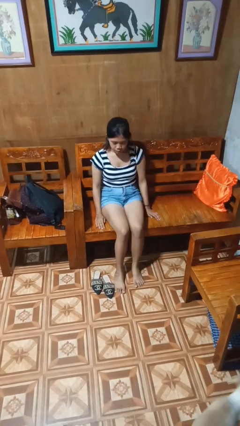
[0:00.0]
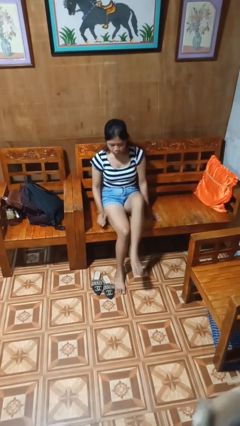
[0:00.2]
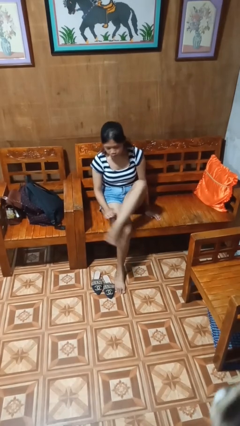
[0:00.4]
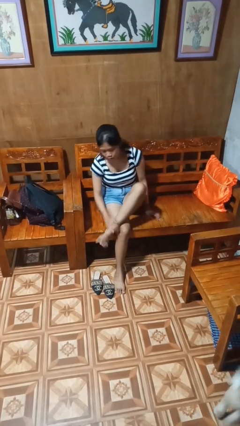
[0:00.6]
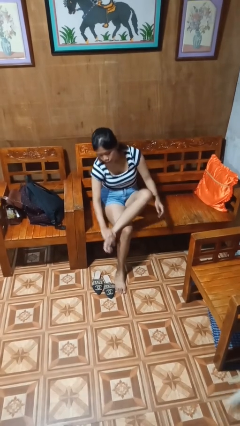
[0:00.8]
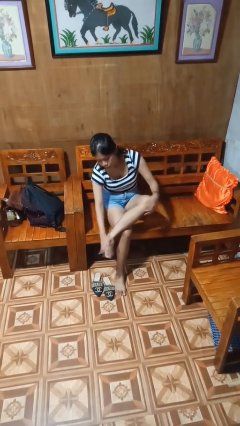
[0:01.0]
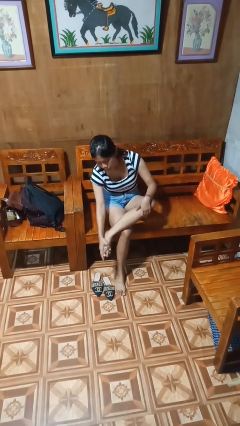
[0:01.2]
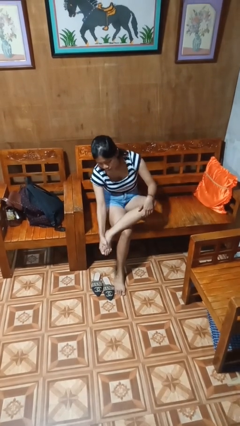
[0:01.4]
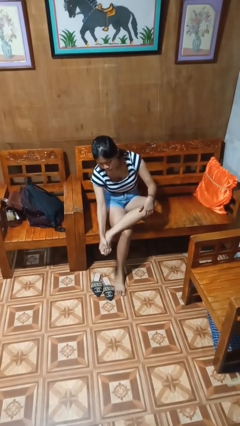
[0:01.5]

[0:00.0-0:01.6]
person rubs foot

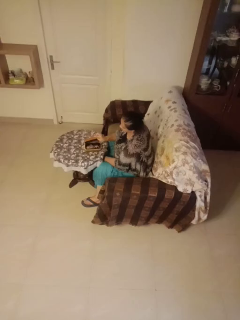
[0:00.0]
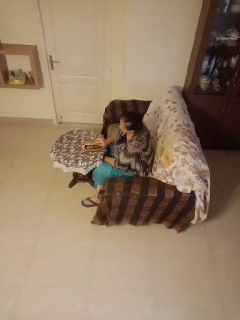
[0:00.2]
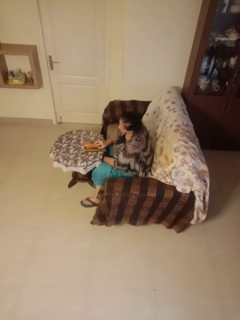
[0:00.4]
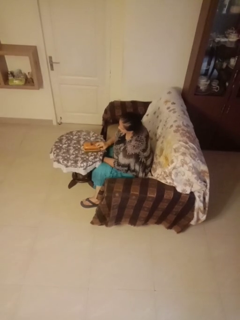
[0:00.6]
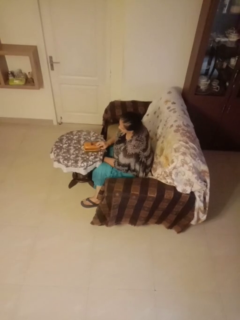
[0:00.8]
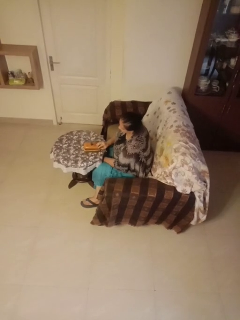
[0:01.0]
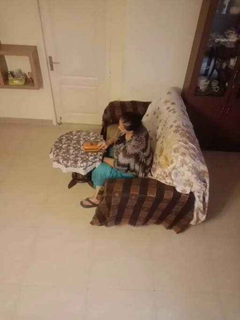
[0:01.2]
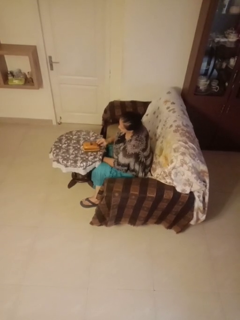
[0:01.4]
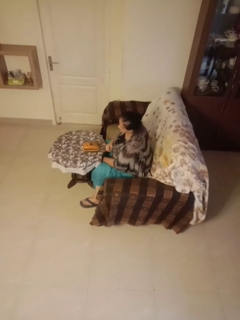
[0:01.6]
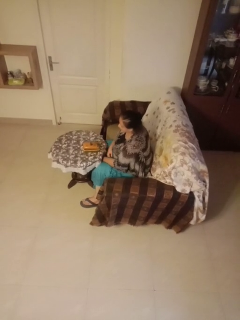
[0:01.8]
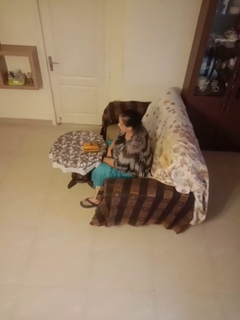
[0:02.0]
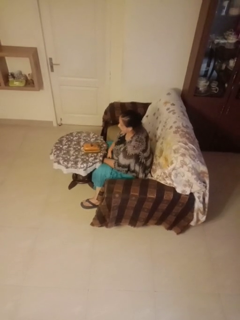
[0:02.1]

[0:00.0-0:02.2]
person closes jewelry box

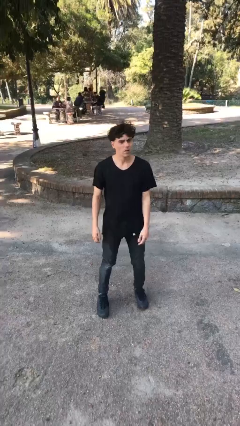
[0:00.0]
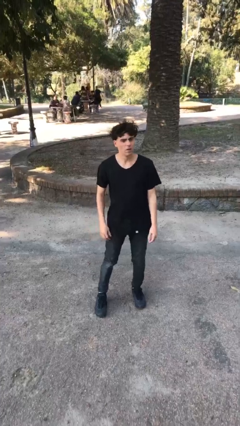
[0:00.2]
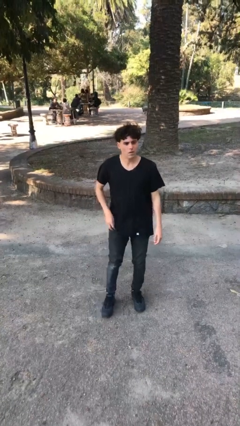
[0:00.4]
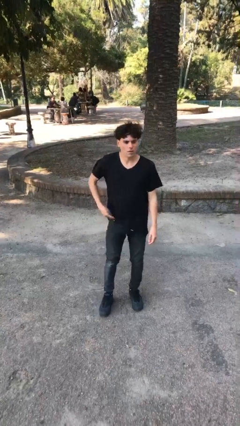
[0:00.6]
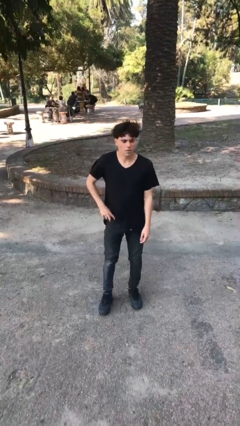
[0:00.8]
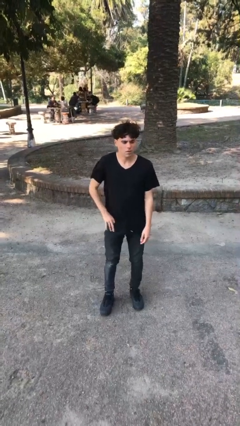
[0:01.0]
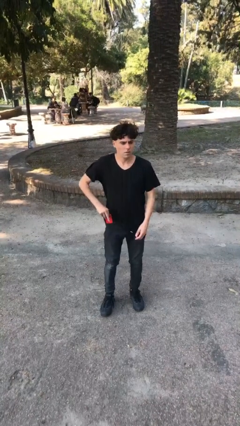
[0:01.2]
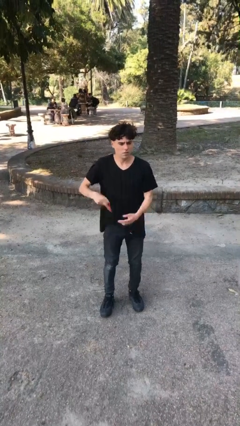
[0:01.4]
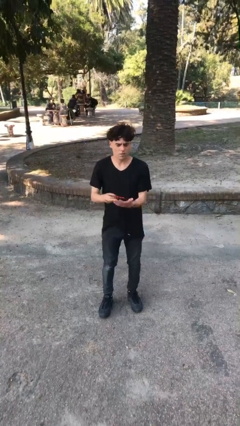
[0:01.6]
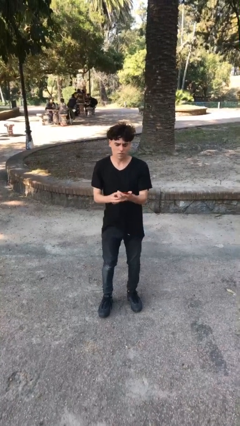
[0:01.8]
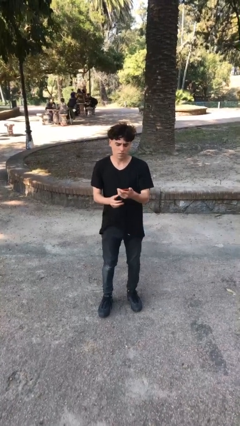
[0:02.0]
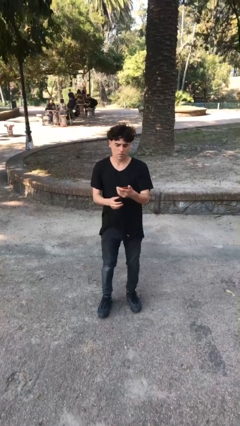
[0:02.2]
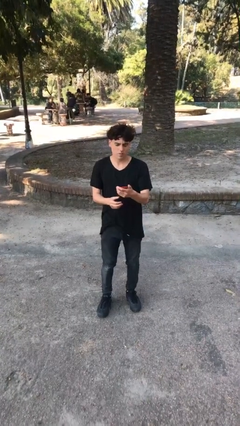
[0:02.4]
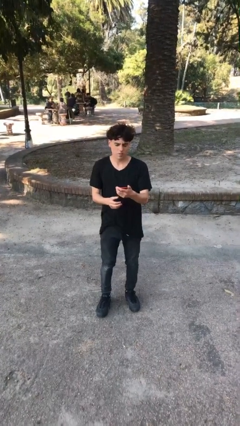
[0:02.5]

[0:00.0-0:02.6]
person takes phone from pocket

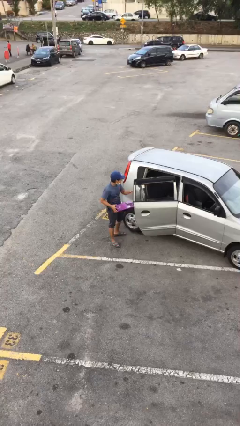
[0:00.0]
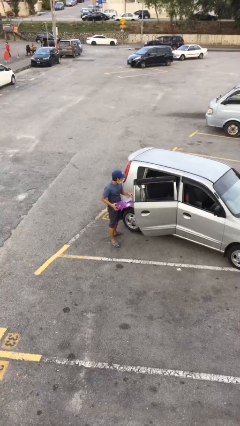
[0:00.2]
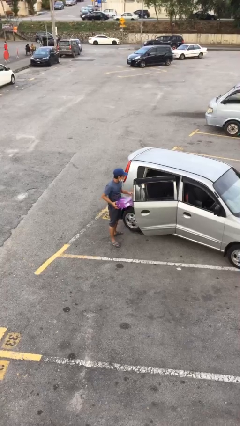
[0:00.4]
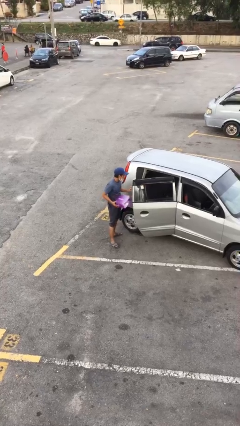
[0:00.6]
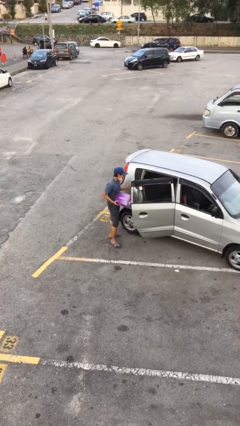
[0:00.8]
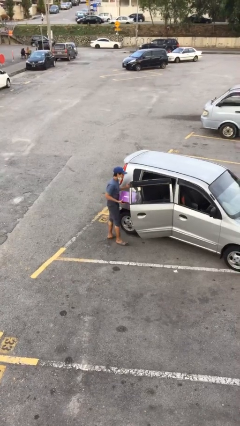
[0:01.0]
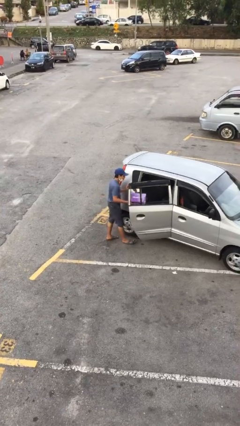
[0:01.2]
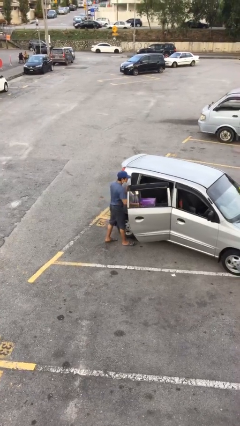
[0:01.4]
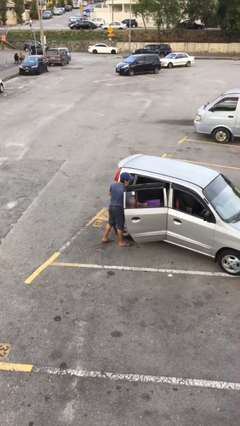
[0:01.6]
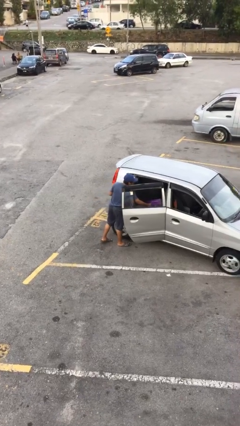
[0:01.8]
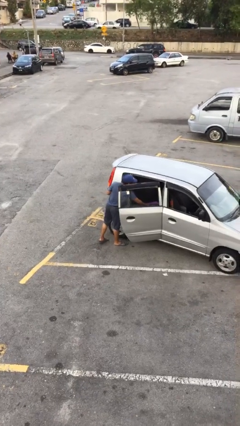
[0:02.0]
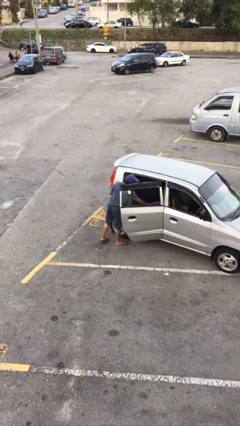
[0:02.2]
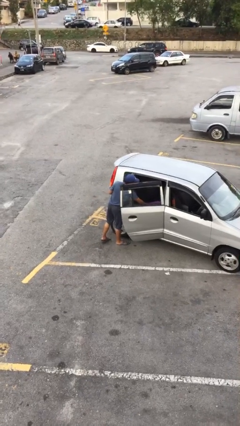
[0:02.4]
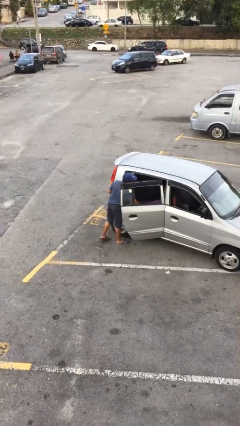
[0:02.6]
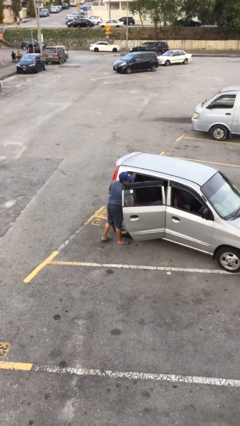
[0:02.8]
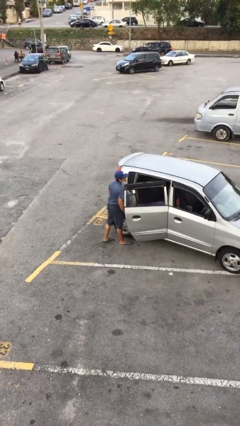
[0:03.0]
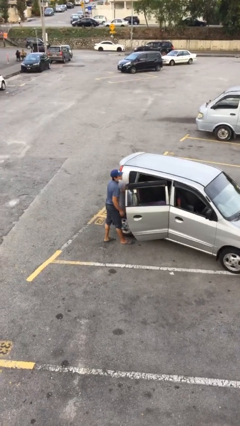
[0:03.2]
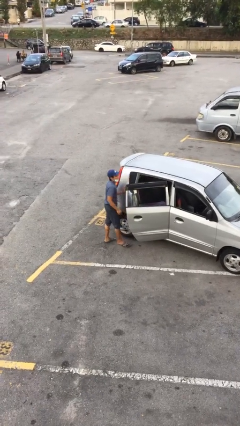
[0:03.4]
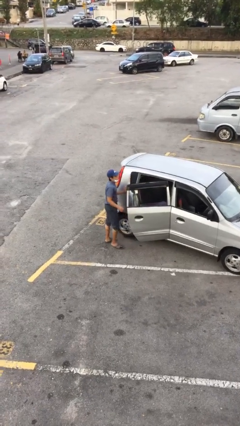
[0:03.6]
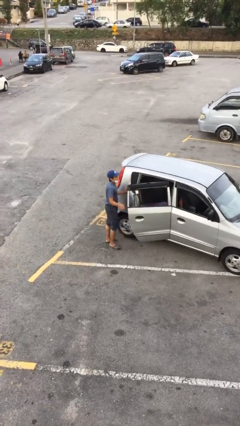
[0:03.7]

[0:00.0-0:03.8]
person loads car

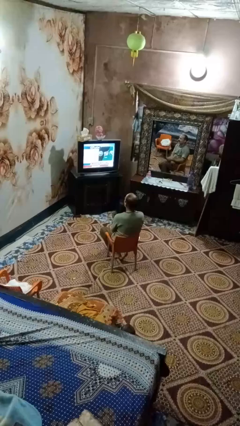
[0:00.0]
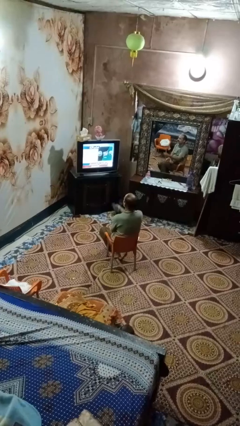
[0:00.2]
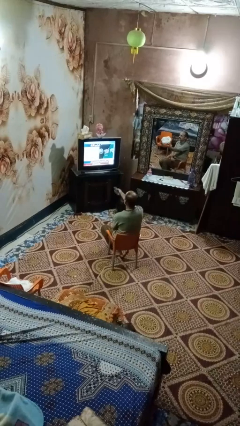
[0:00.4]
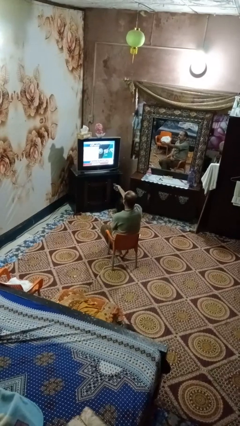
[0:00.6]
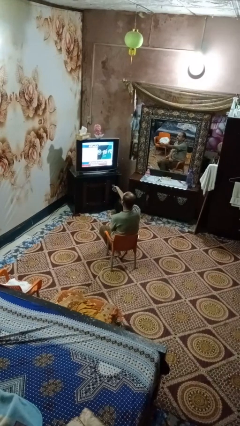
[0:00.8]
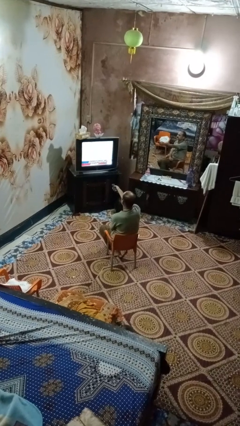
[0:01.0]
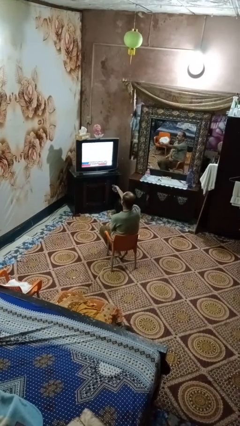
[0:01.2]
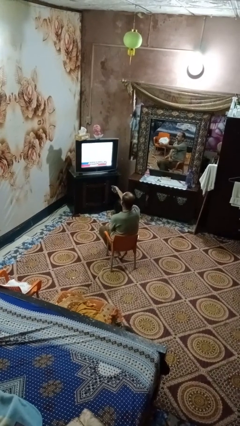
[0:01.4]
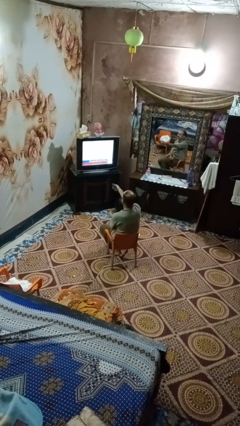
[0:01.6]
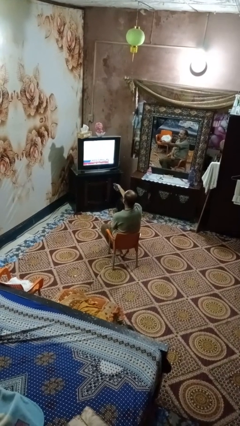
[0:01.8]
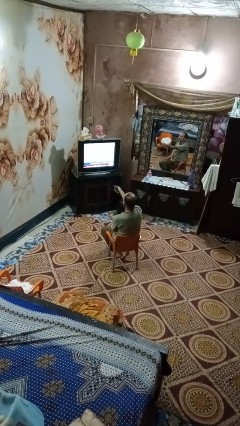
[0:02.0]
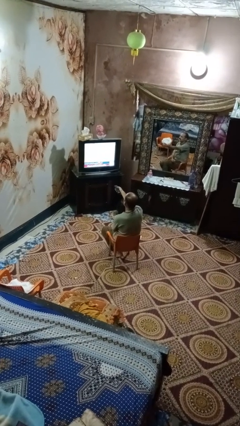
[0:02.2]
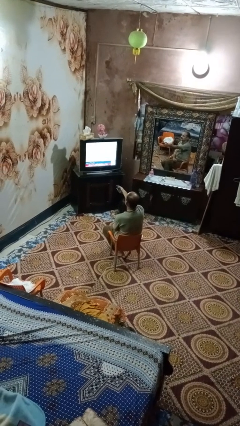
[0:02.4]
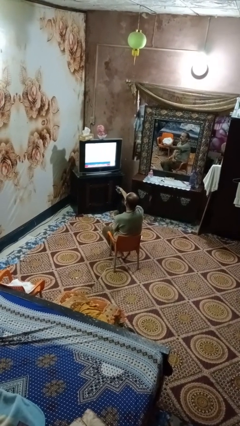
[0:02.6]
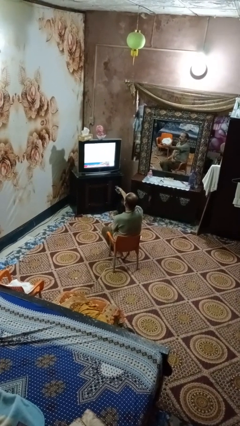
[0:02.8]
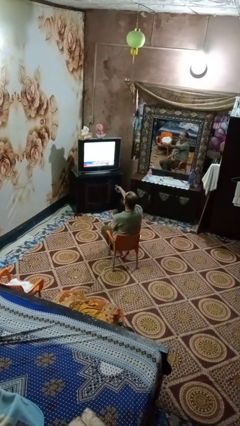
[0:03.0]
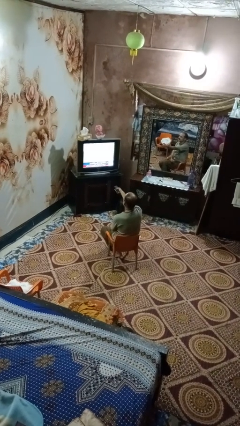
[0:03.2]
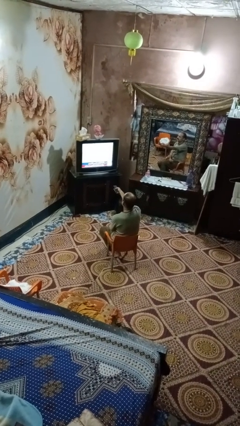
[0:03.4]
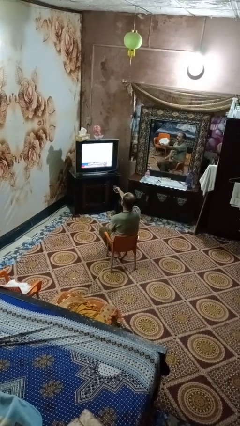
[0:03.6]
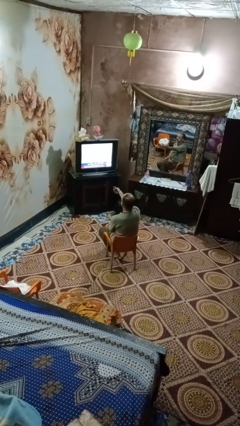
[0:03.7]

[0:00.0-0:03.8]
person uses television remote

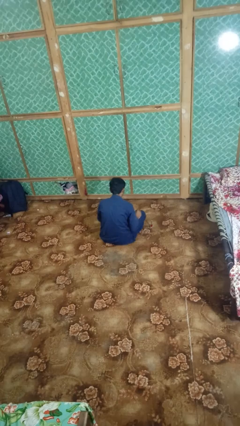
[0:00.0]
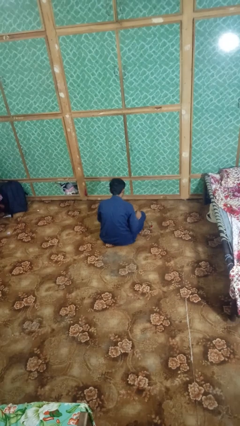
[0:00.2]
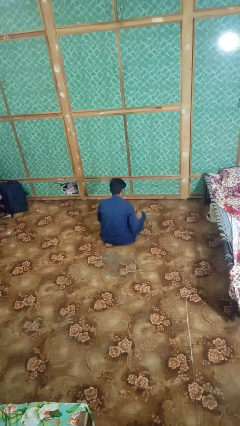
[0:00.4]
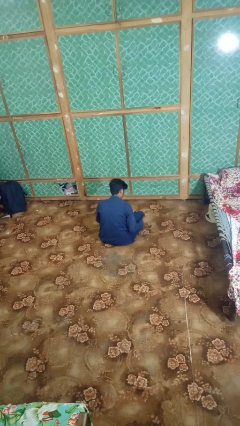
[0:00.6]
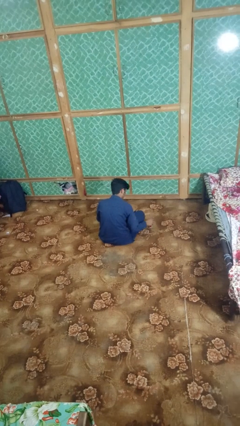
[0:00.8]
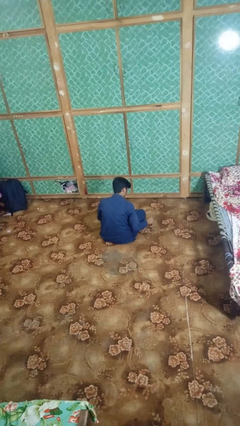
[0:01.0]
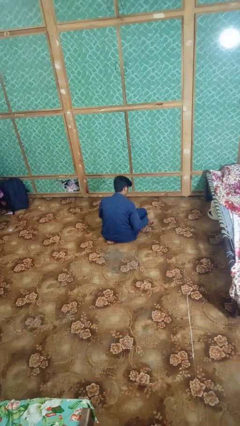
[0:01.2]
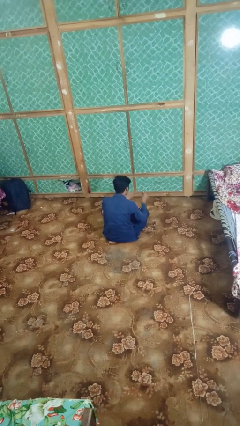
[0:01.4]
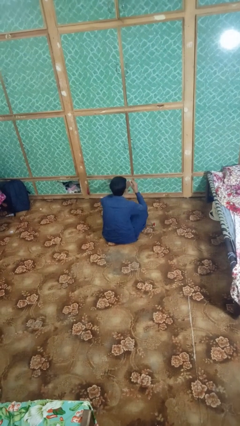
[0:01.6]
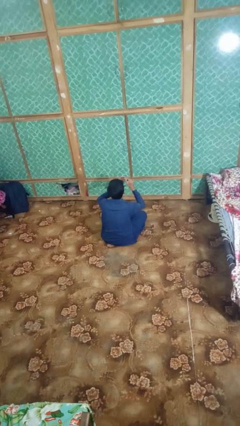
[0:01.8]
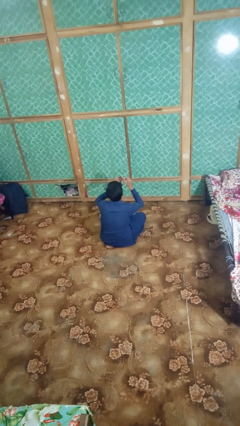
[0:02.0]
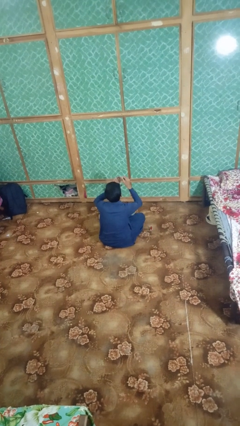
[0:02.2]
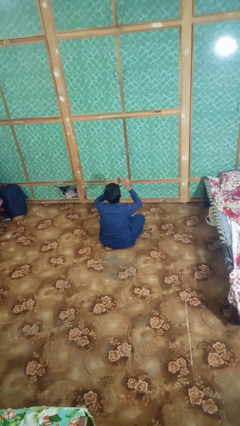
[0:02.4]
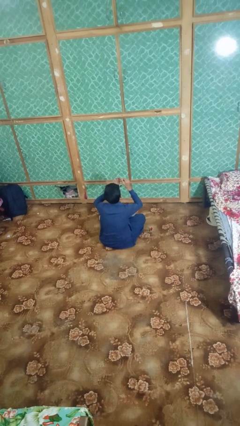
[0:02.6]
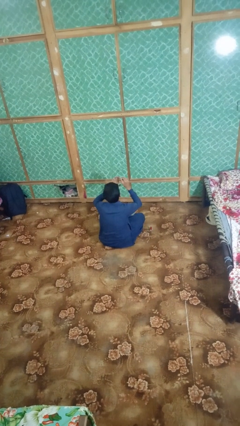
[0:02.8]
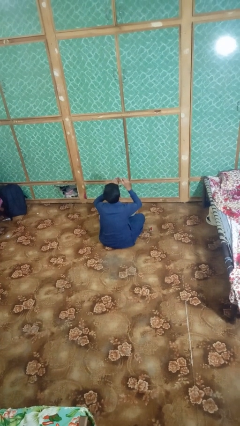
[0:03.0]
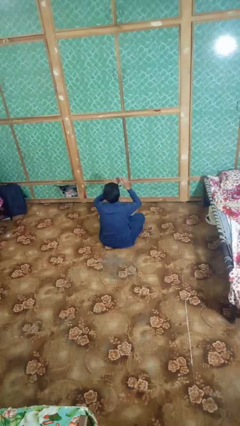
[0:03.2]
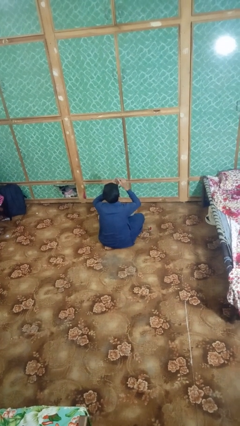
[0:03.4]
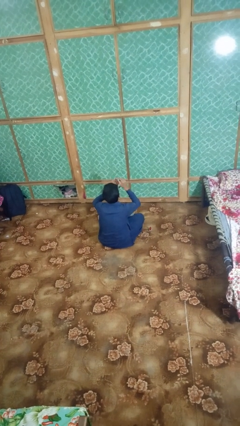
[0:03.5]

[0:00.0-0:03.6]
person paints fingernails

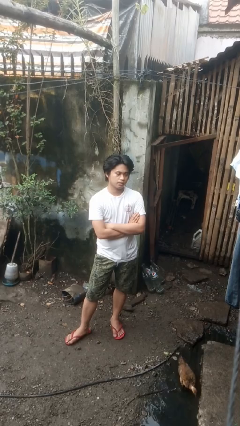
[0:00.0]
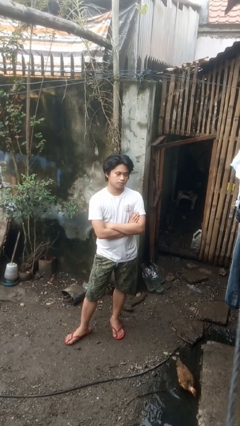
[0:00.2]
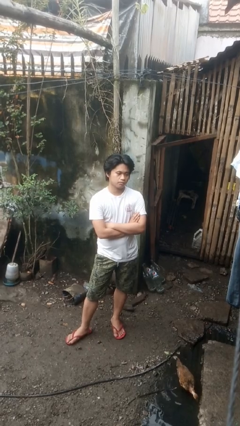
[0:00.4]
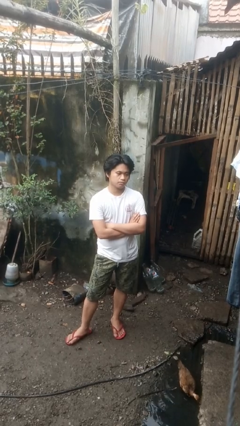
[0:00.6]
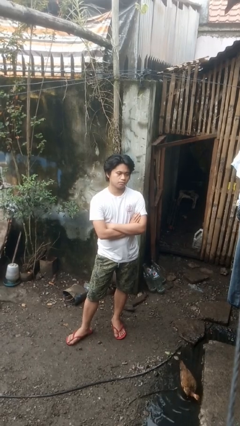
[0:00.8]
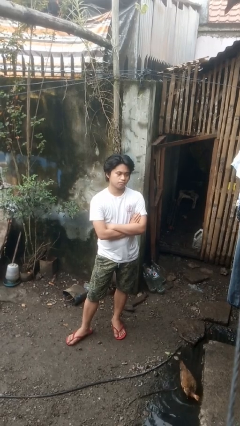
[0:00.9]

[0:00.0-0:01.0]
person nods head
